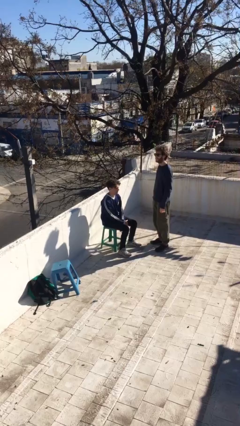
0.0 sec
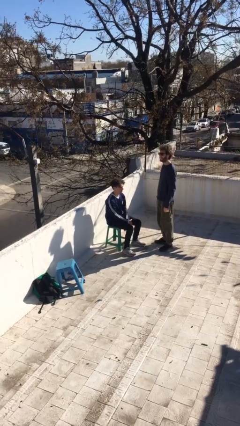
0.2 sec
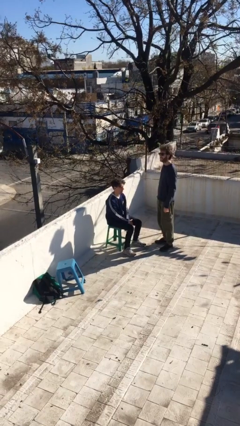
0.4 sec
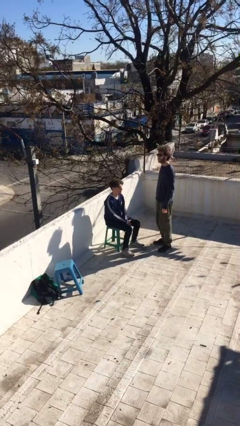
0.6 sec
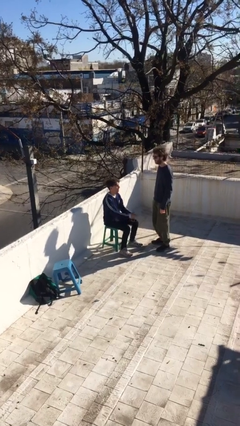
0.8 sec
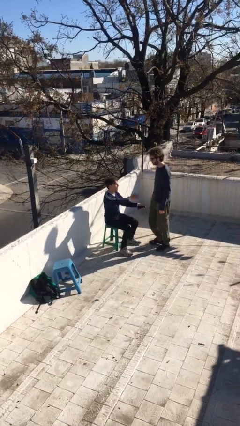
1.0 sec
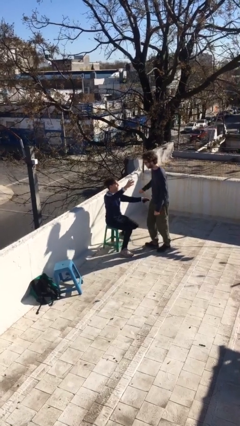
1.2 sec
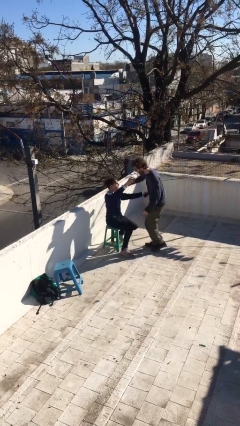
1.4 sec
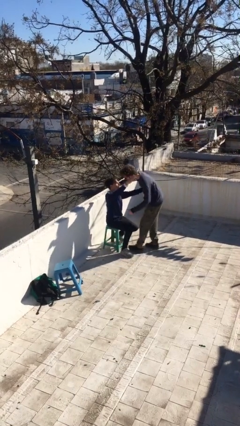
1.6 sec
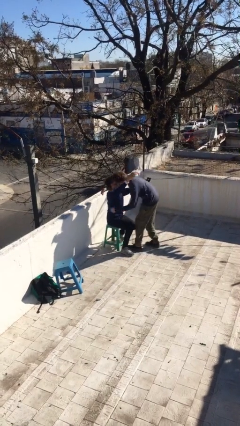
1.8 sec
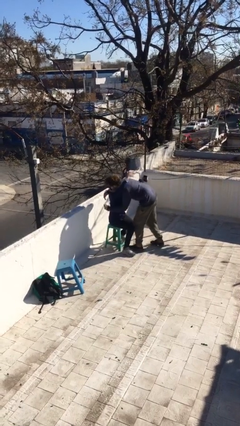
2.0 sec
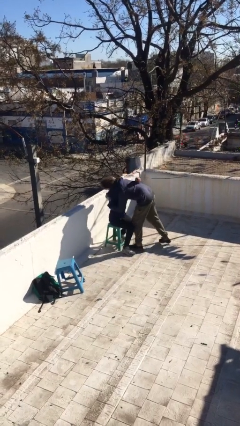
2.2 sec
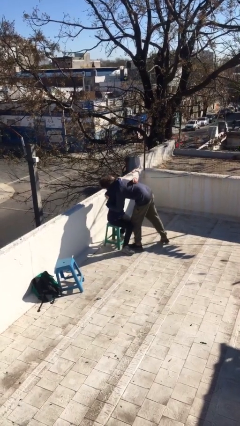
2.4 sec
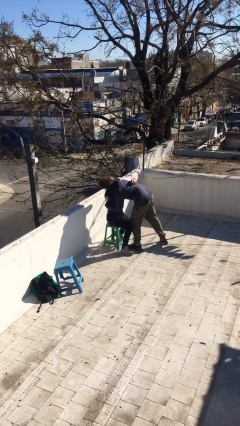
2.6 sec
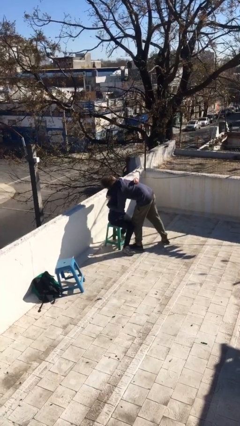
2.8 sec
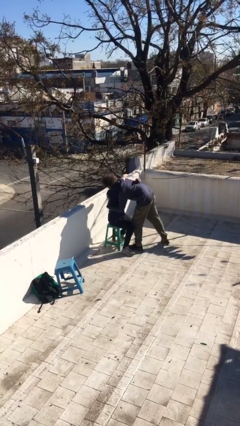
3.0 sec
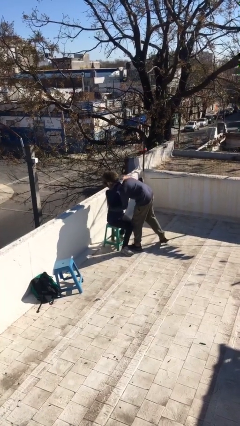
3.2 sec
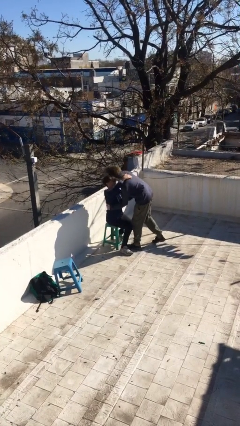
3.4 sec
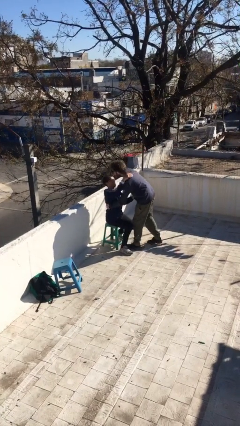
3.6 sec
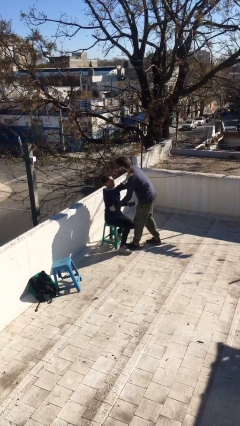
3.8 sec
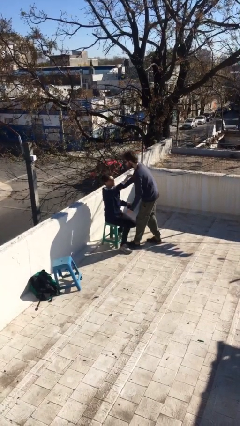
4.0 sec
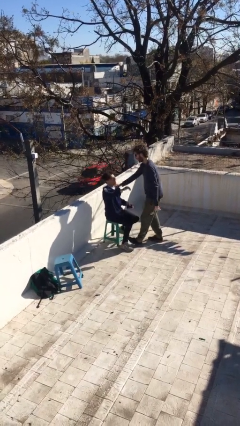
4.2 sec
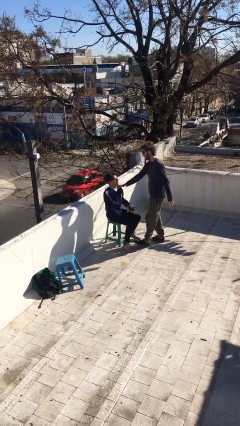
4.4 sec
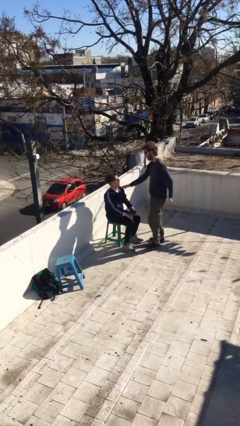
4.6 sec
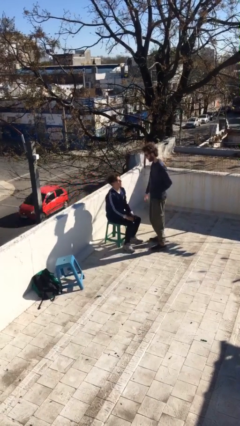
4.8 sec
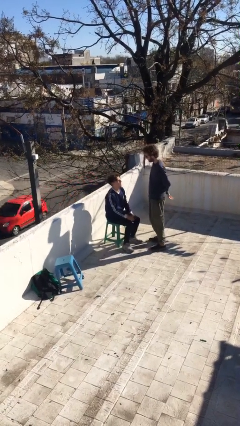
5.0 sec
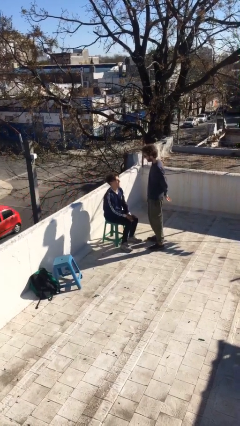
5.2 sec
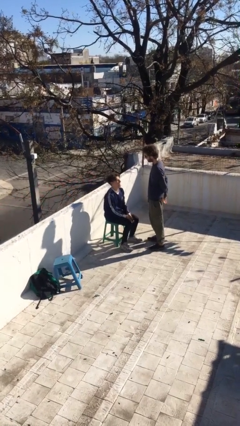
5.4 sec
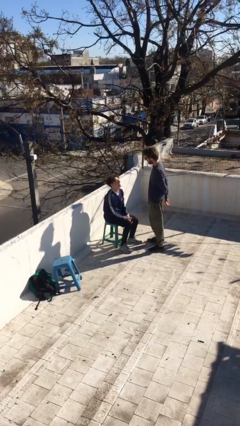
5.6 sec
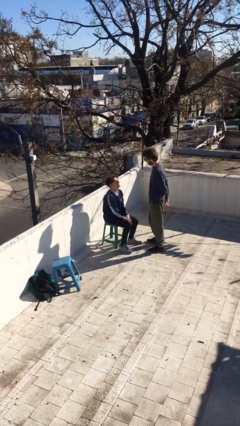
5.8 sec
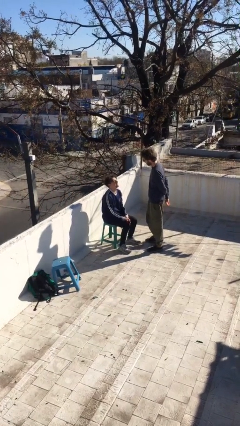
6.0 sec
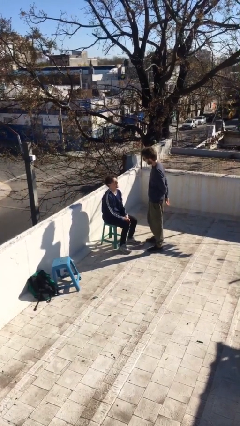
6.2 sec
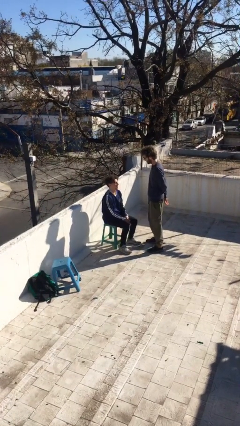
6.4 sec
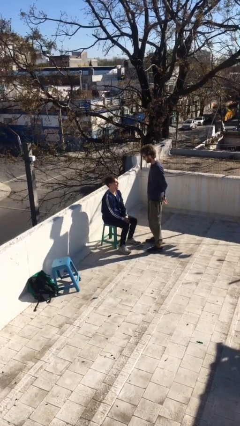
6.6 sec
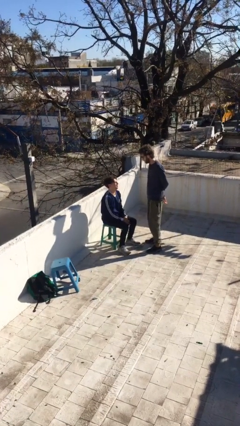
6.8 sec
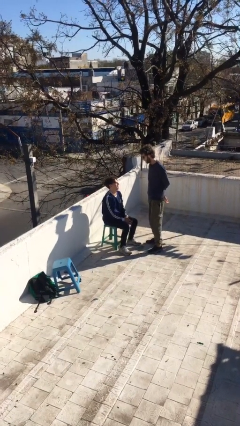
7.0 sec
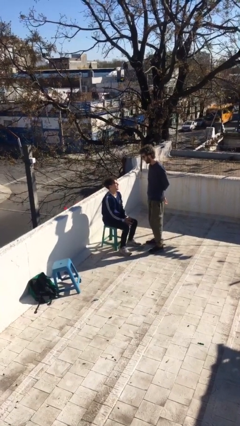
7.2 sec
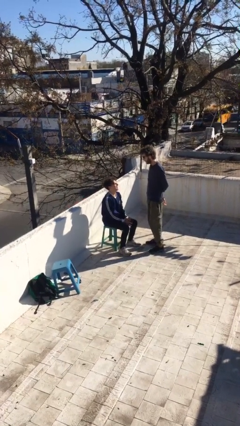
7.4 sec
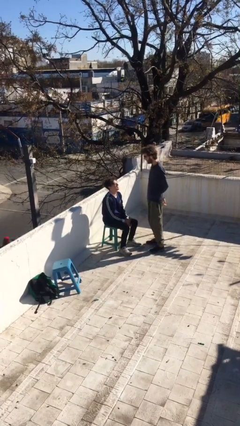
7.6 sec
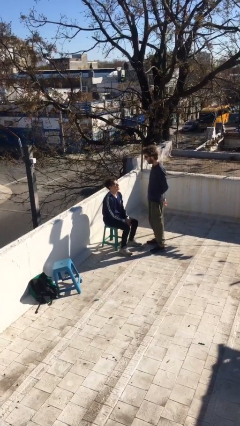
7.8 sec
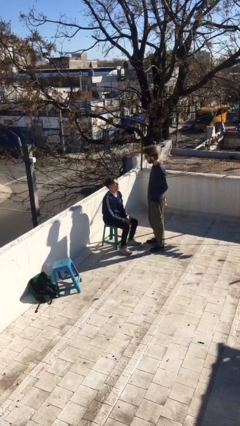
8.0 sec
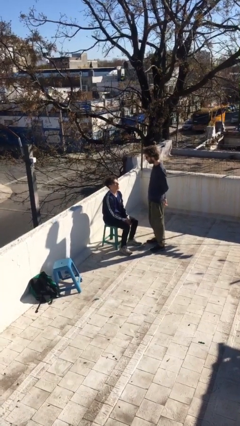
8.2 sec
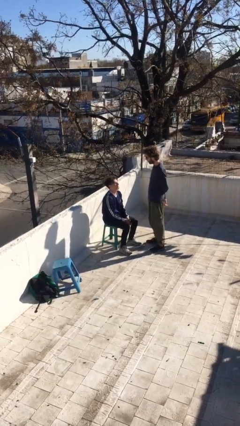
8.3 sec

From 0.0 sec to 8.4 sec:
person embraces person

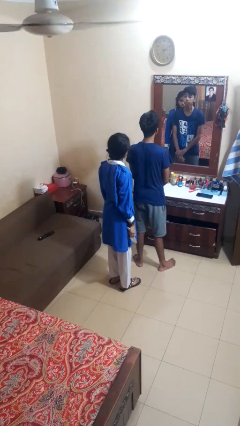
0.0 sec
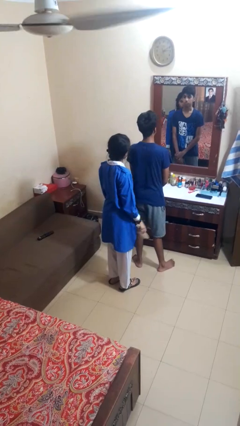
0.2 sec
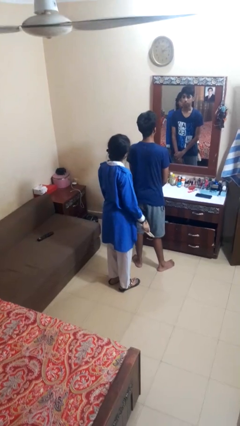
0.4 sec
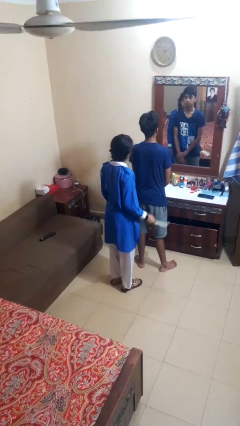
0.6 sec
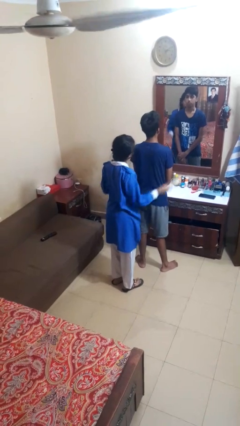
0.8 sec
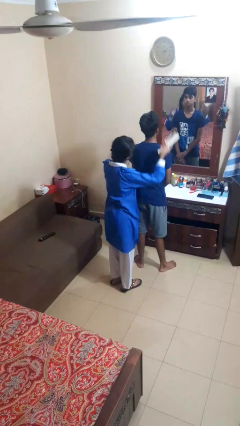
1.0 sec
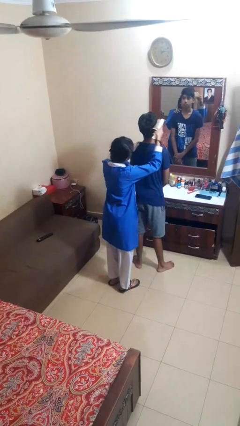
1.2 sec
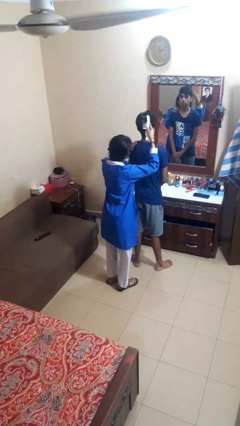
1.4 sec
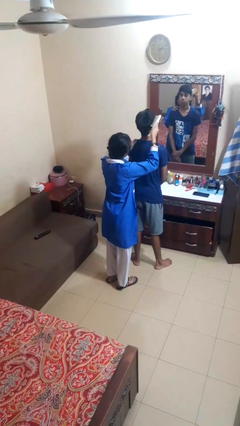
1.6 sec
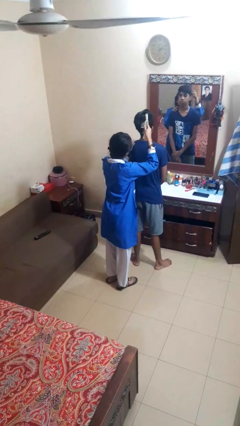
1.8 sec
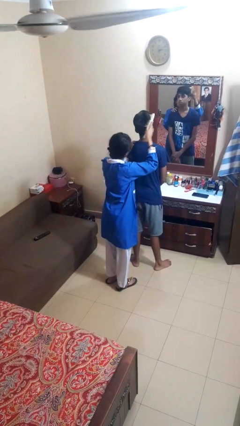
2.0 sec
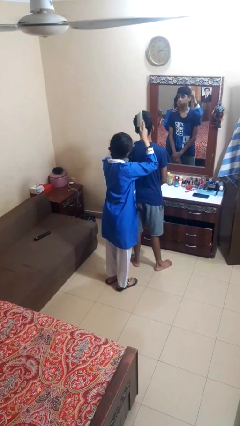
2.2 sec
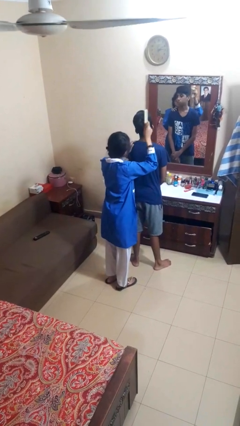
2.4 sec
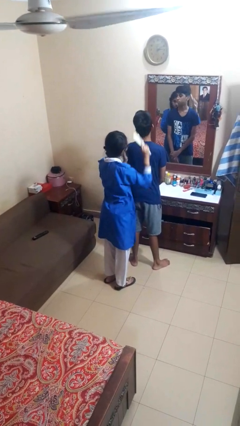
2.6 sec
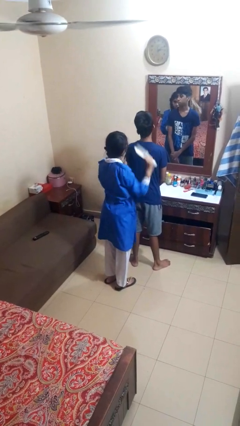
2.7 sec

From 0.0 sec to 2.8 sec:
person brushes hair of person

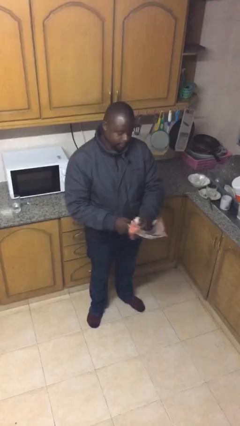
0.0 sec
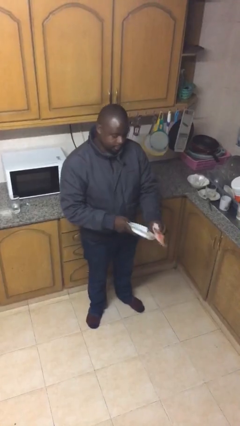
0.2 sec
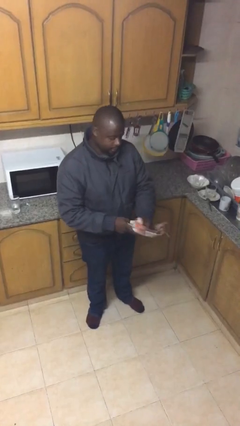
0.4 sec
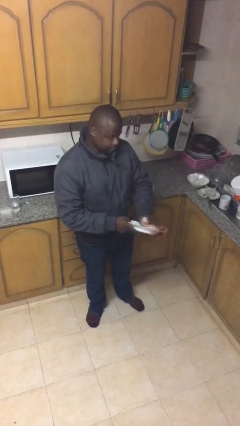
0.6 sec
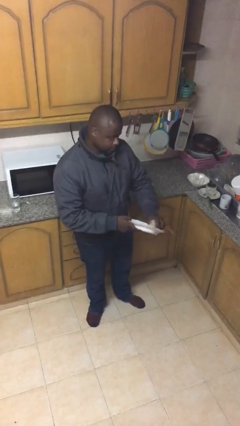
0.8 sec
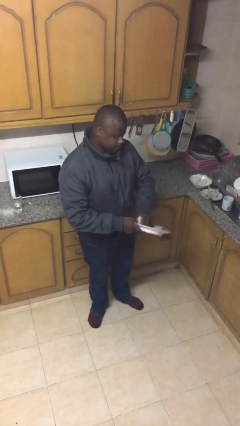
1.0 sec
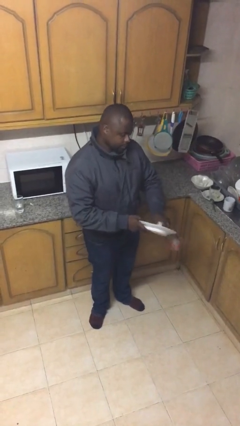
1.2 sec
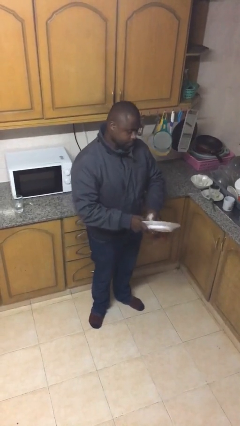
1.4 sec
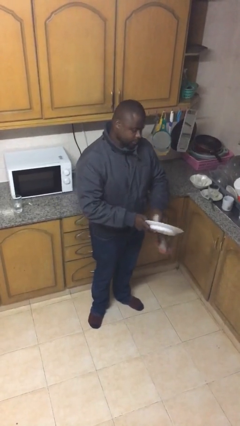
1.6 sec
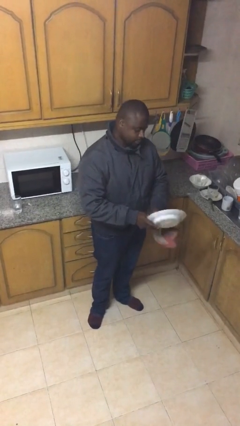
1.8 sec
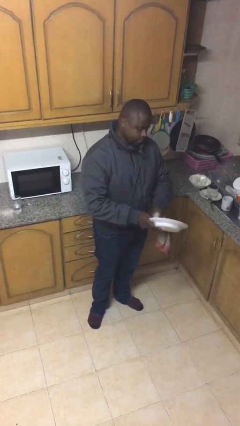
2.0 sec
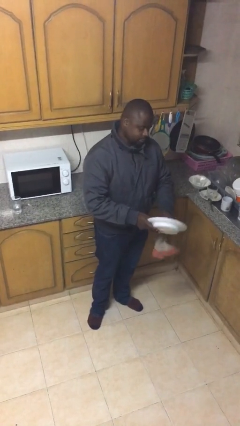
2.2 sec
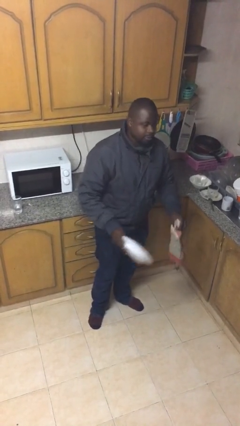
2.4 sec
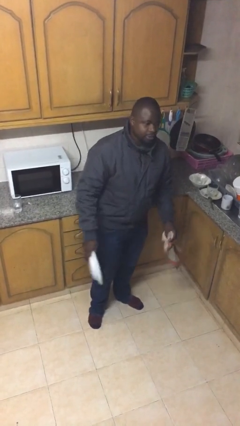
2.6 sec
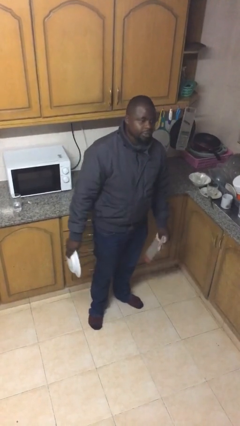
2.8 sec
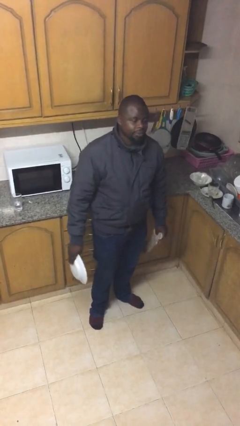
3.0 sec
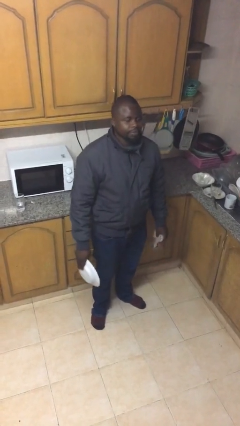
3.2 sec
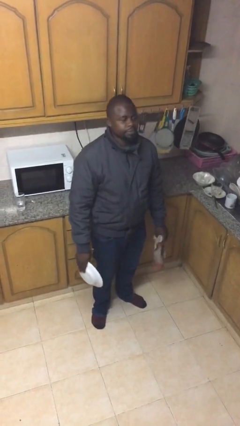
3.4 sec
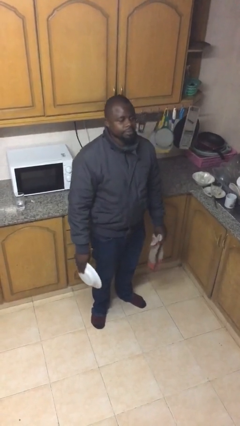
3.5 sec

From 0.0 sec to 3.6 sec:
person dries dish

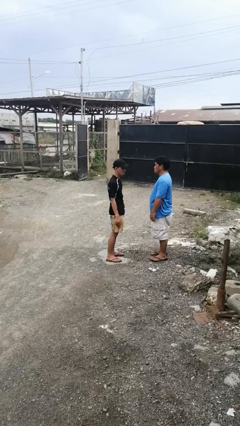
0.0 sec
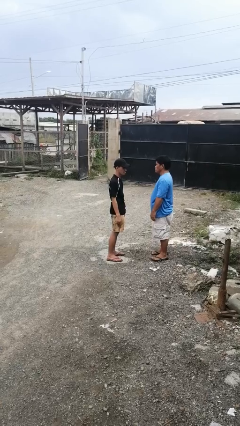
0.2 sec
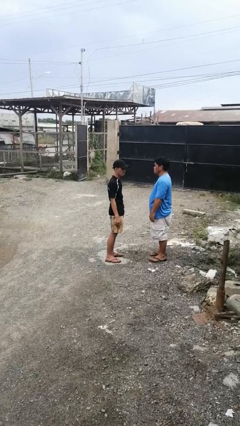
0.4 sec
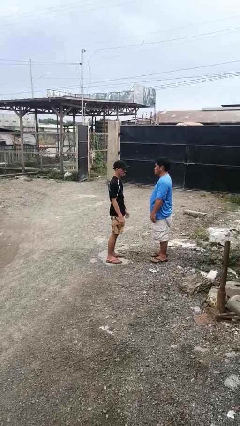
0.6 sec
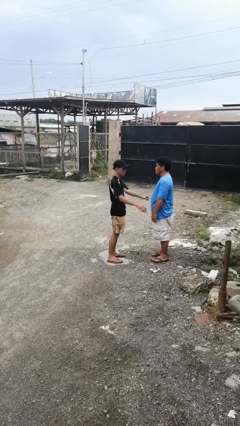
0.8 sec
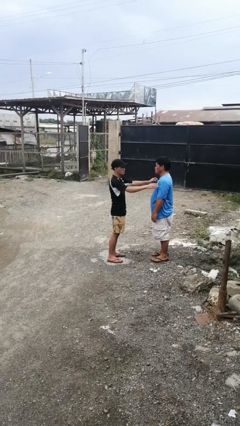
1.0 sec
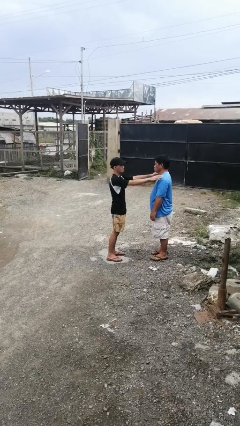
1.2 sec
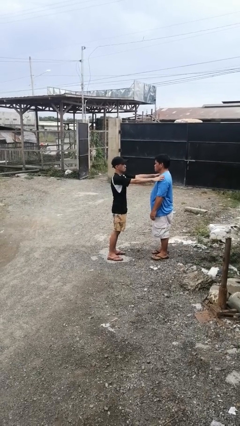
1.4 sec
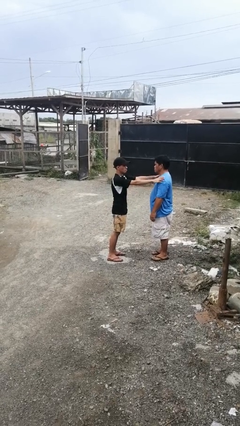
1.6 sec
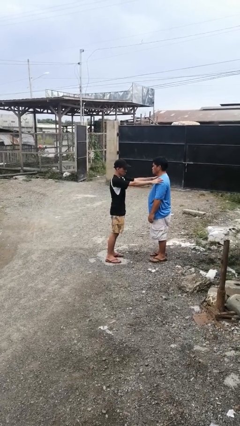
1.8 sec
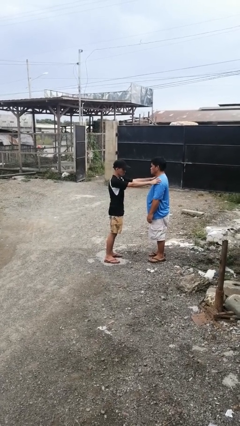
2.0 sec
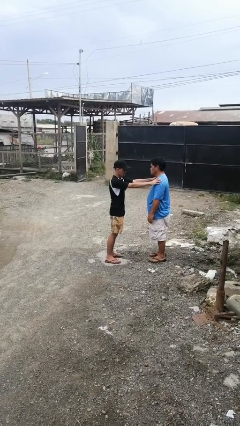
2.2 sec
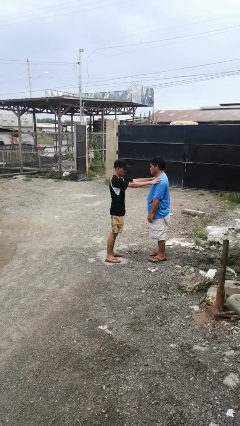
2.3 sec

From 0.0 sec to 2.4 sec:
person grabs person by shoulder

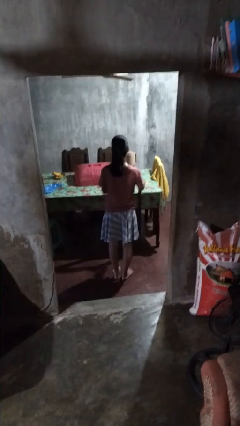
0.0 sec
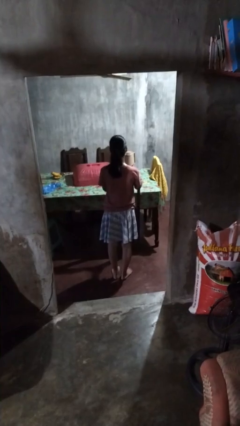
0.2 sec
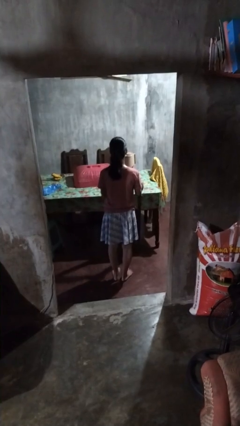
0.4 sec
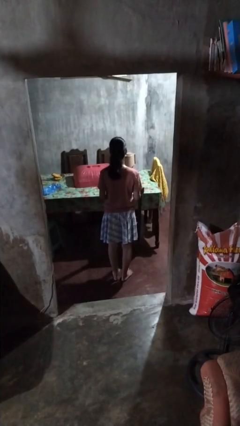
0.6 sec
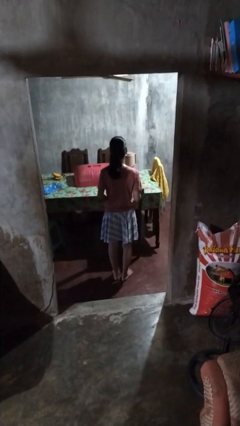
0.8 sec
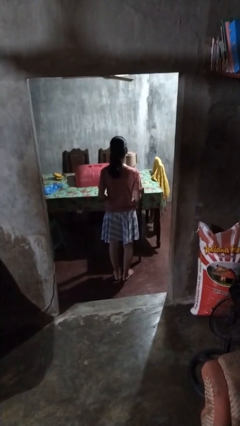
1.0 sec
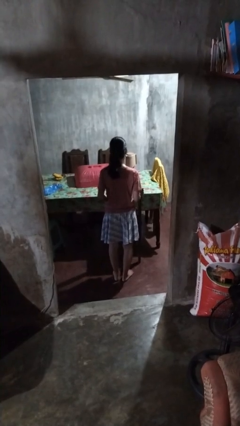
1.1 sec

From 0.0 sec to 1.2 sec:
person pulls out chair
